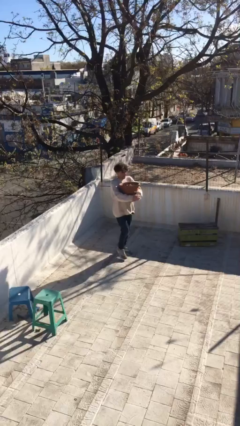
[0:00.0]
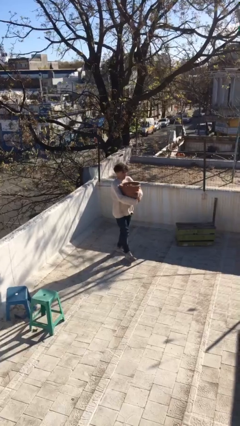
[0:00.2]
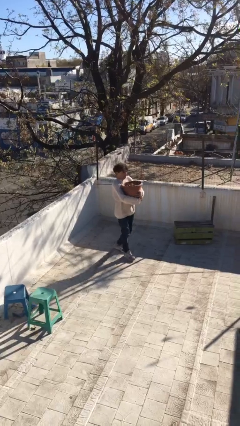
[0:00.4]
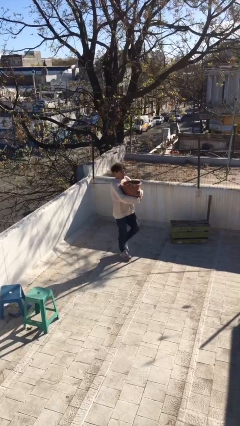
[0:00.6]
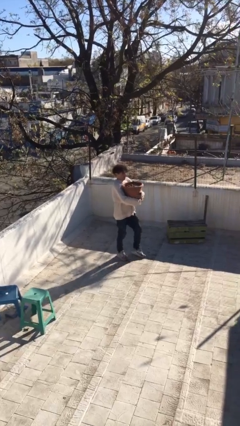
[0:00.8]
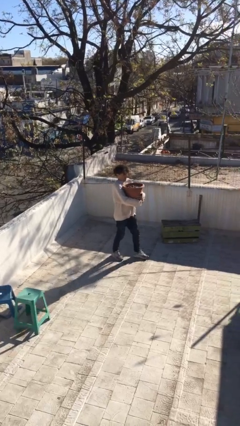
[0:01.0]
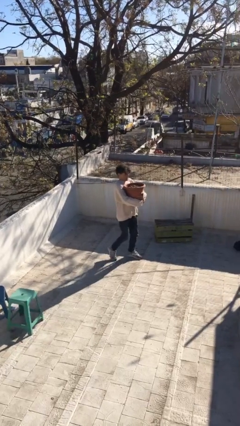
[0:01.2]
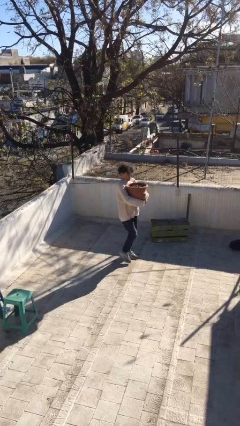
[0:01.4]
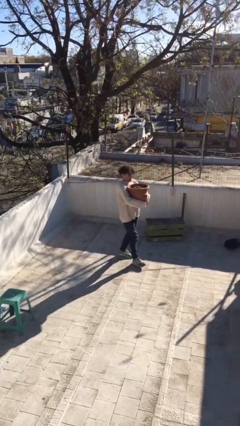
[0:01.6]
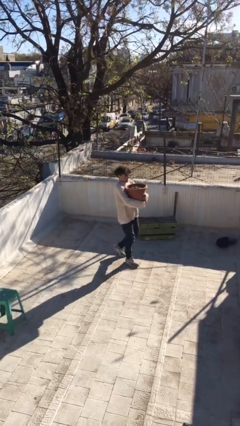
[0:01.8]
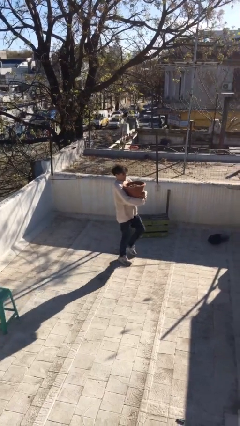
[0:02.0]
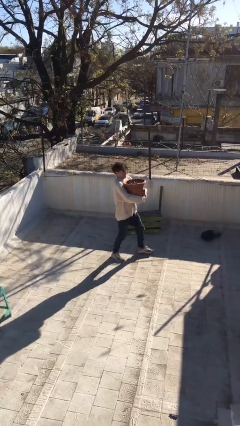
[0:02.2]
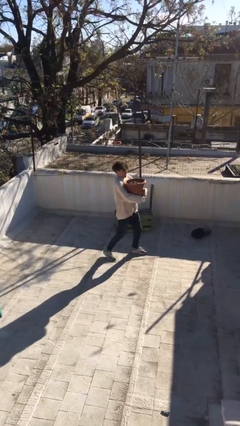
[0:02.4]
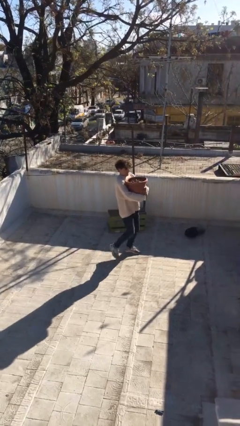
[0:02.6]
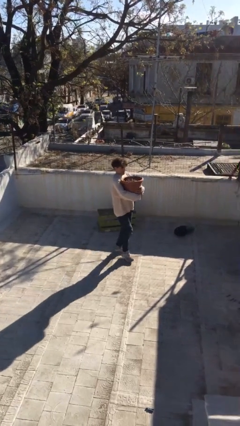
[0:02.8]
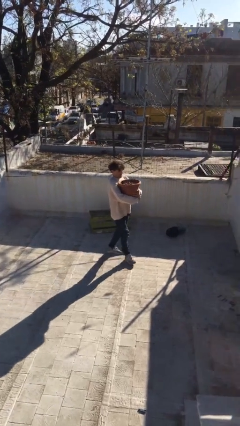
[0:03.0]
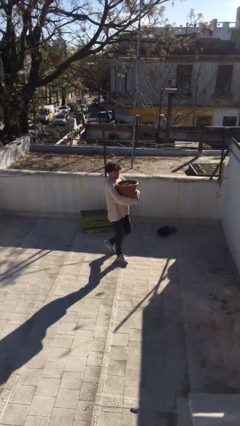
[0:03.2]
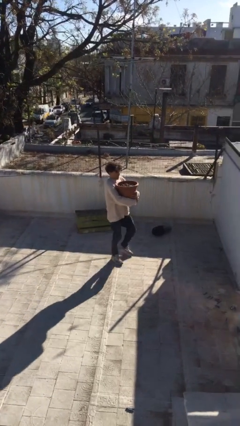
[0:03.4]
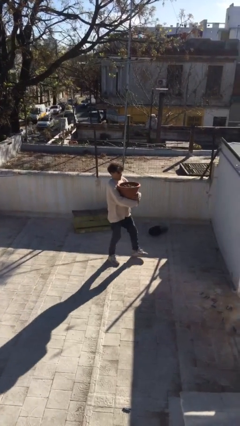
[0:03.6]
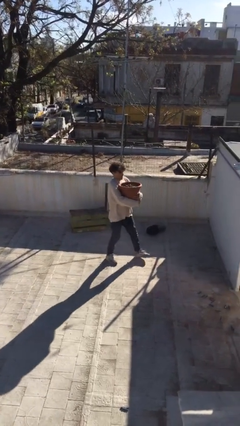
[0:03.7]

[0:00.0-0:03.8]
person carries heavy object

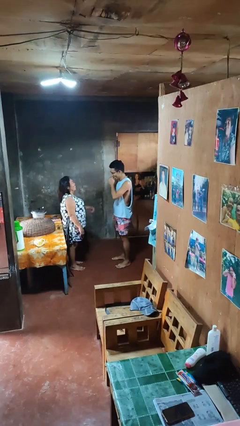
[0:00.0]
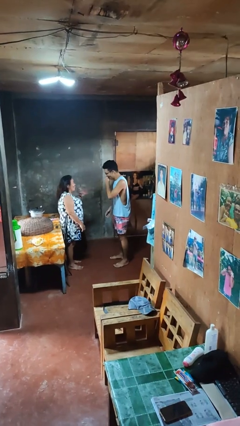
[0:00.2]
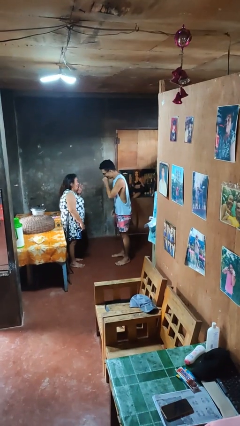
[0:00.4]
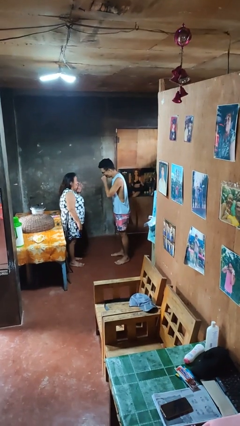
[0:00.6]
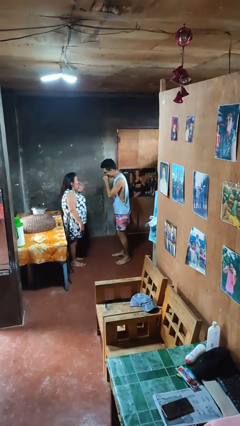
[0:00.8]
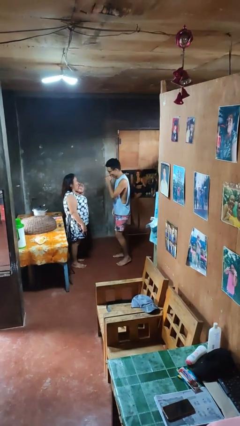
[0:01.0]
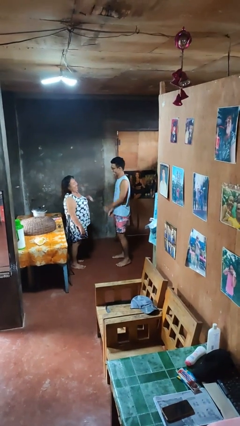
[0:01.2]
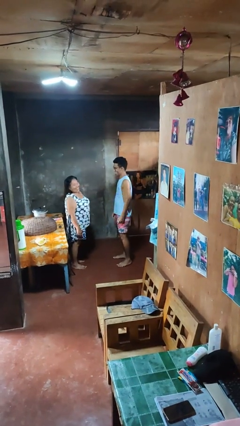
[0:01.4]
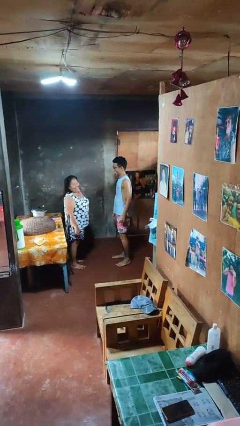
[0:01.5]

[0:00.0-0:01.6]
person laughs with person

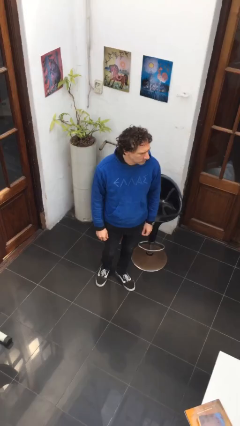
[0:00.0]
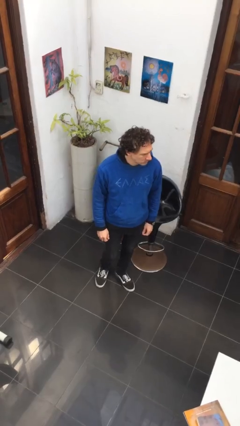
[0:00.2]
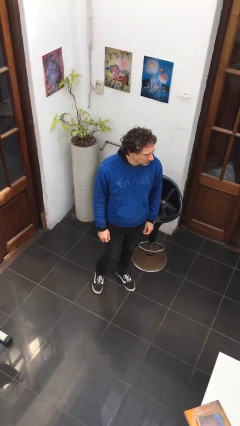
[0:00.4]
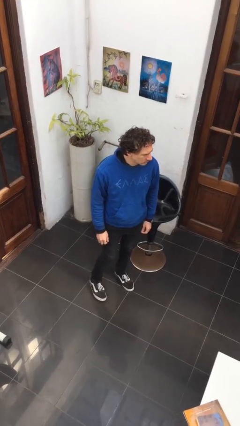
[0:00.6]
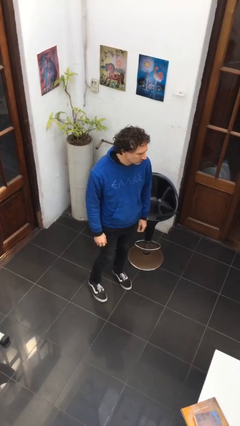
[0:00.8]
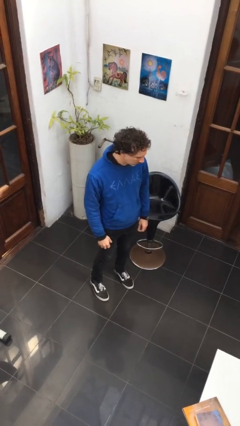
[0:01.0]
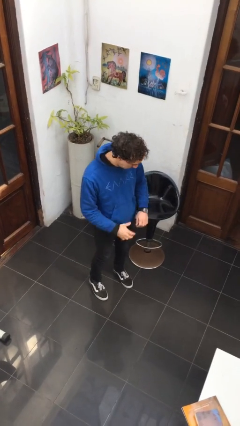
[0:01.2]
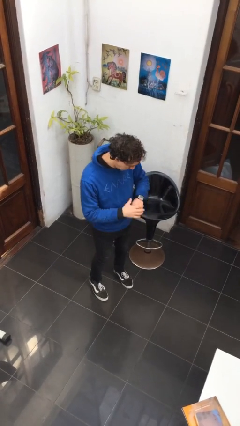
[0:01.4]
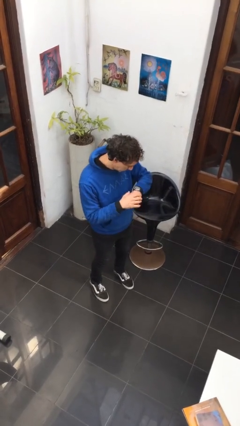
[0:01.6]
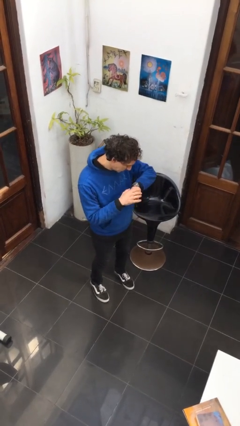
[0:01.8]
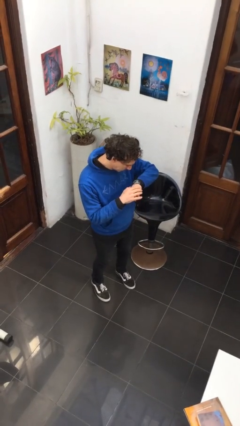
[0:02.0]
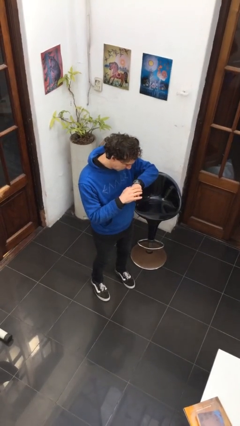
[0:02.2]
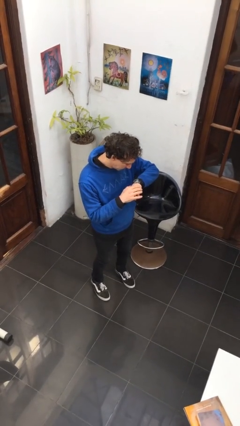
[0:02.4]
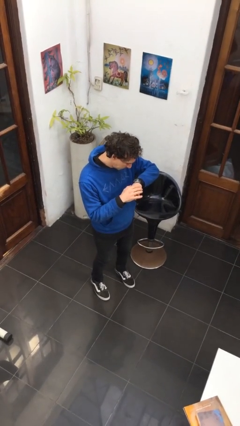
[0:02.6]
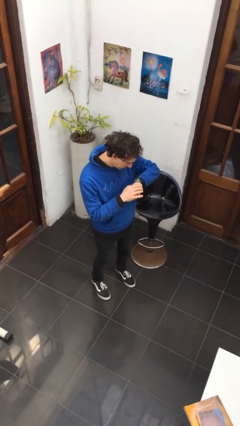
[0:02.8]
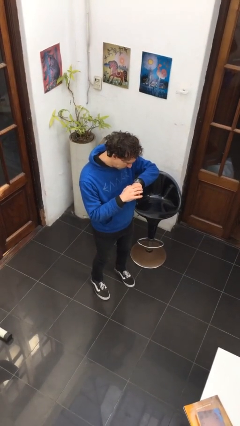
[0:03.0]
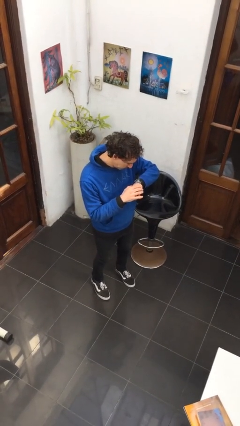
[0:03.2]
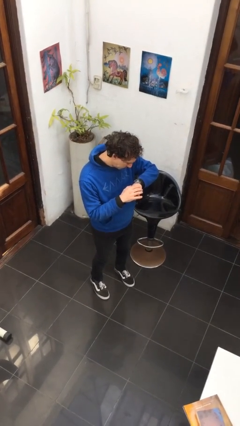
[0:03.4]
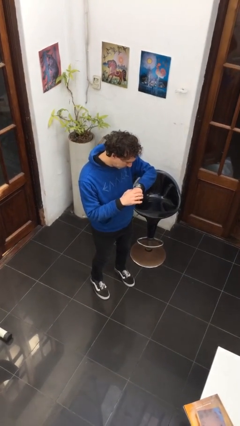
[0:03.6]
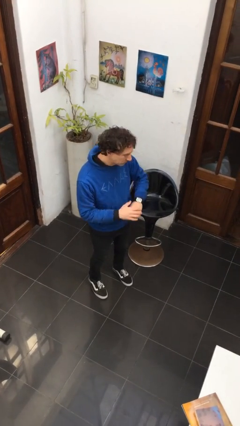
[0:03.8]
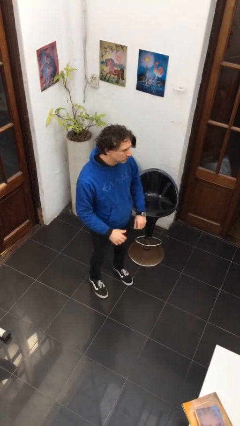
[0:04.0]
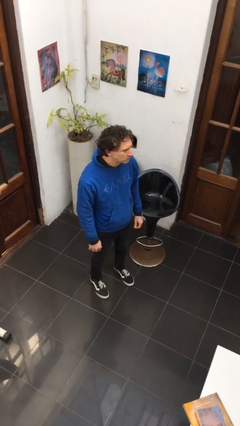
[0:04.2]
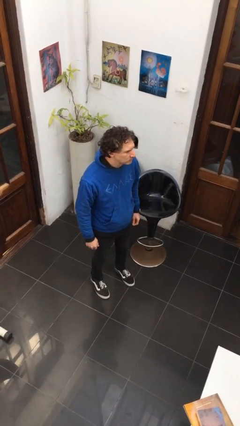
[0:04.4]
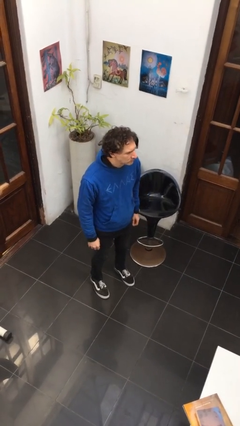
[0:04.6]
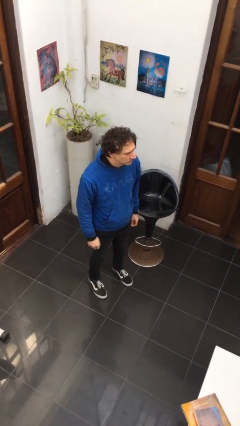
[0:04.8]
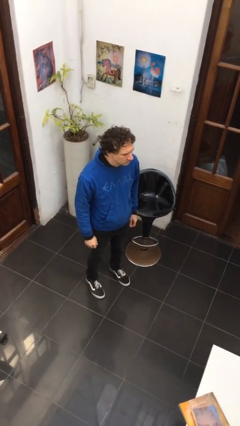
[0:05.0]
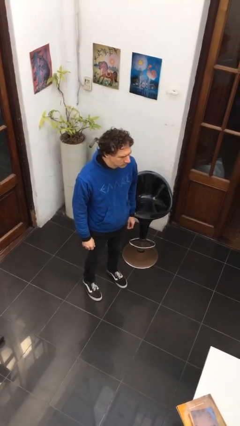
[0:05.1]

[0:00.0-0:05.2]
person looks at wristwatch

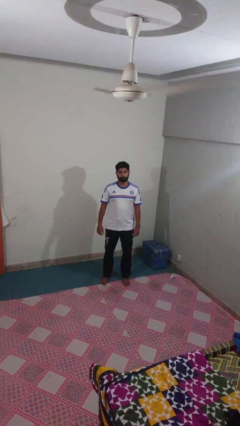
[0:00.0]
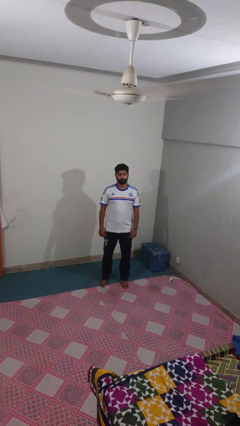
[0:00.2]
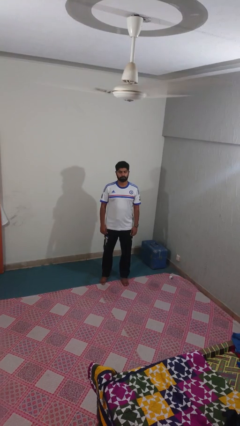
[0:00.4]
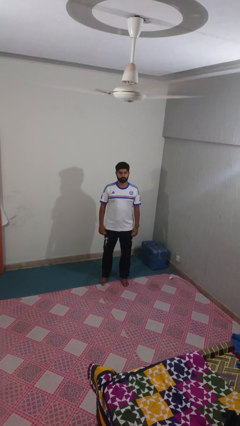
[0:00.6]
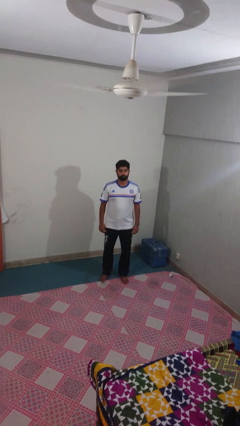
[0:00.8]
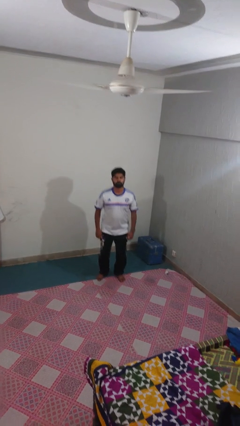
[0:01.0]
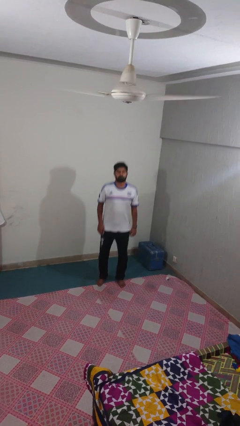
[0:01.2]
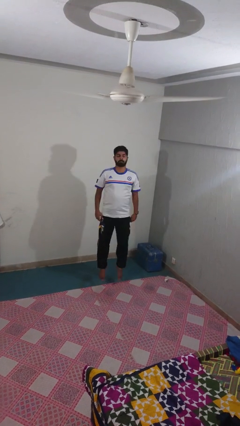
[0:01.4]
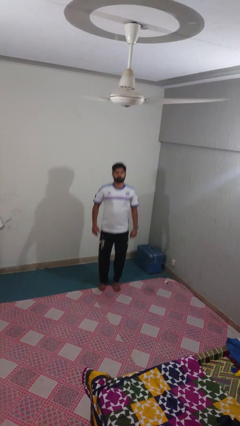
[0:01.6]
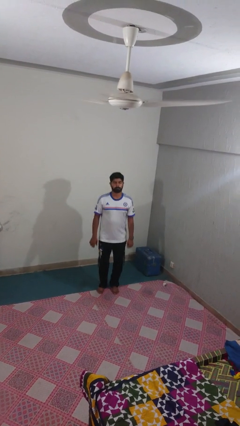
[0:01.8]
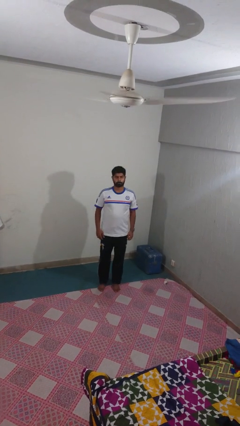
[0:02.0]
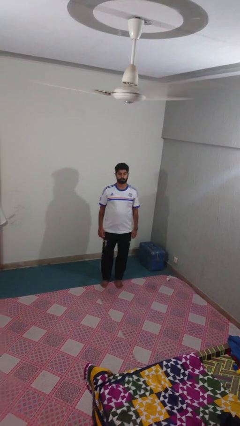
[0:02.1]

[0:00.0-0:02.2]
person jumps

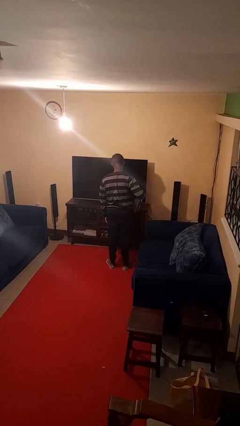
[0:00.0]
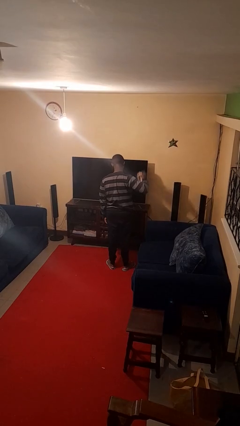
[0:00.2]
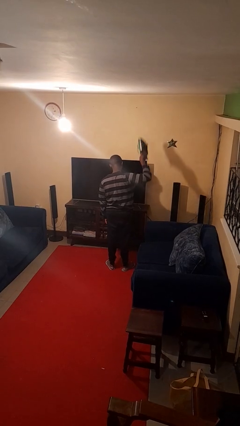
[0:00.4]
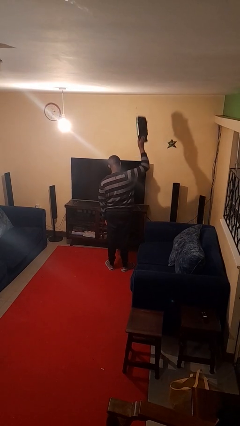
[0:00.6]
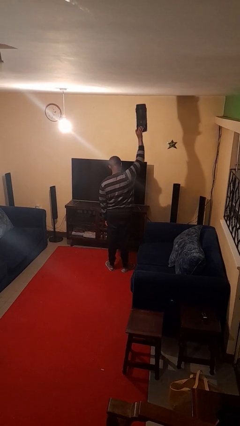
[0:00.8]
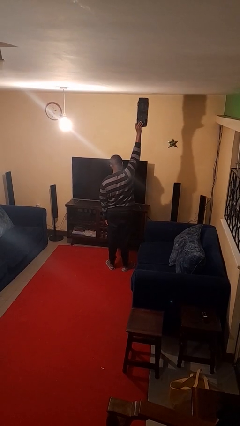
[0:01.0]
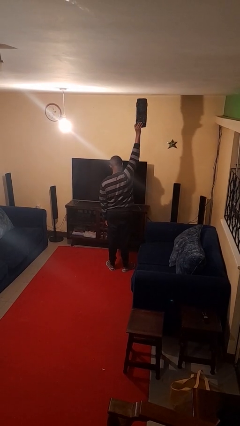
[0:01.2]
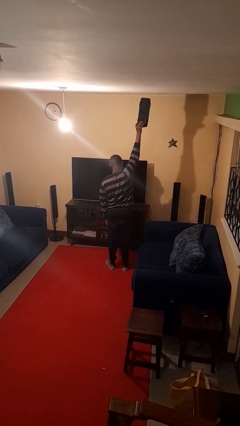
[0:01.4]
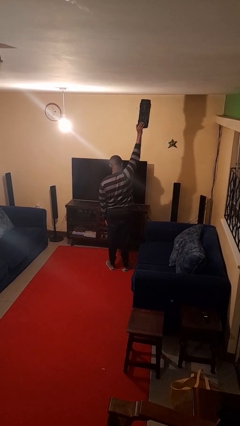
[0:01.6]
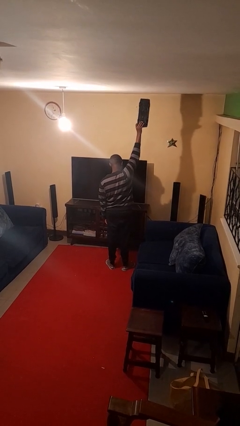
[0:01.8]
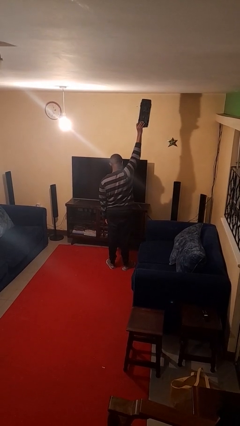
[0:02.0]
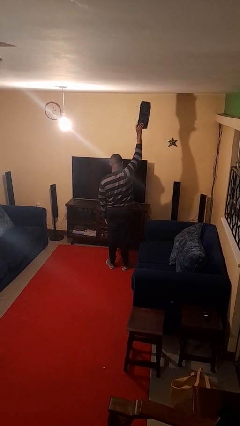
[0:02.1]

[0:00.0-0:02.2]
person holds object above head

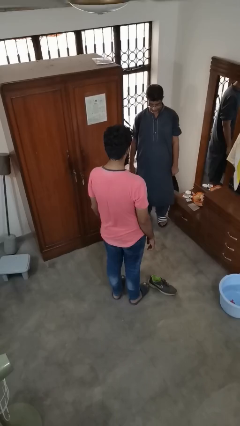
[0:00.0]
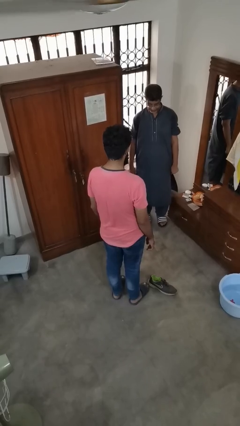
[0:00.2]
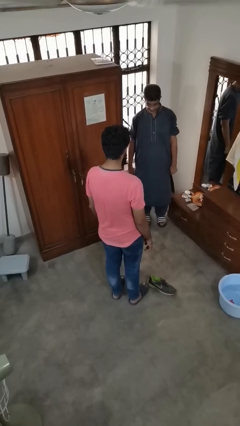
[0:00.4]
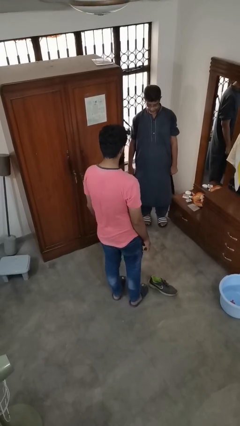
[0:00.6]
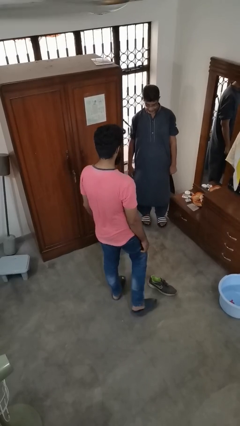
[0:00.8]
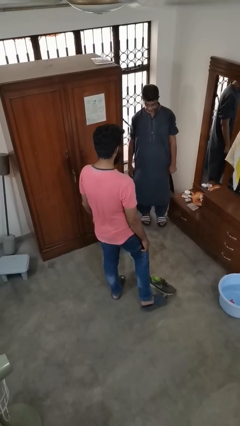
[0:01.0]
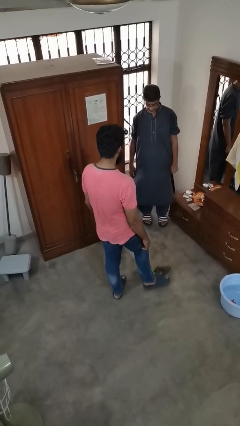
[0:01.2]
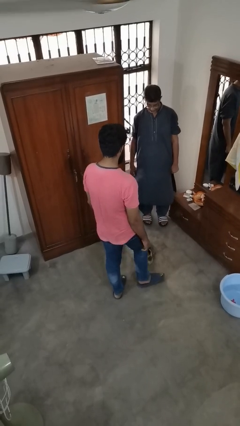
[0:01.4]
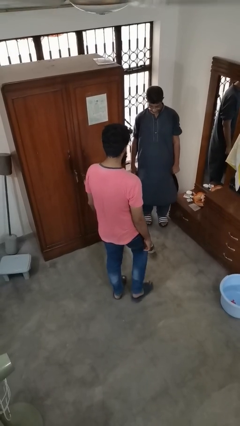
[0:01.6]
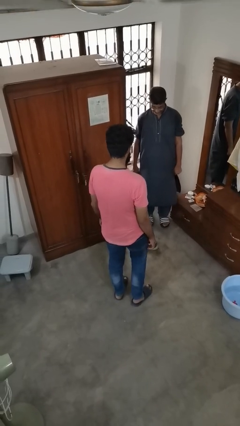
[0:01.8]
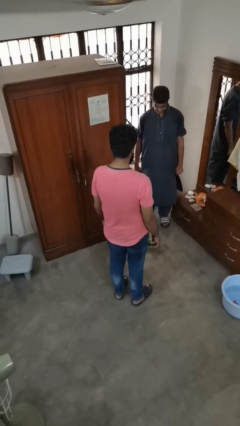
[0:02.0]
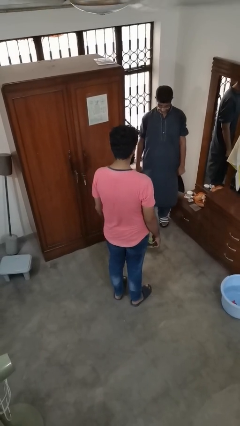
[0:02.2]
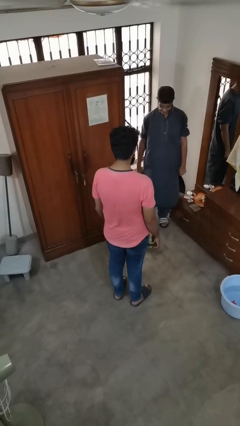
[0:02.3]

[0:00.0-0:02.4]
person kicks object to person

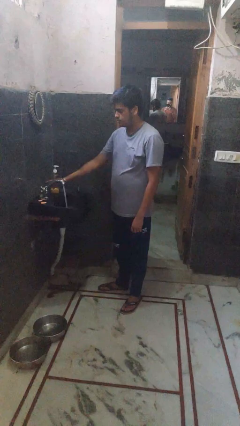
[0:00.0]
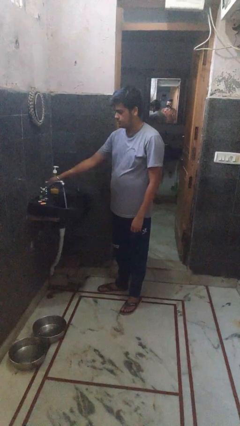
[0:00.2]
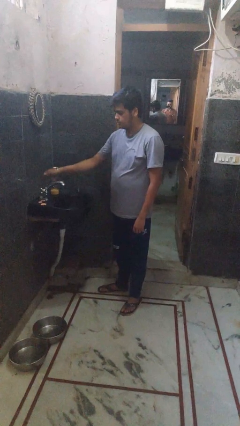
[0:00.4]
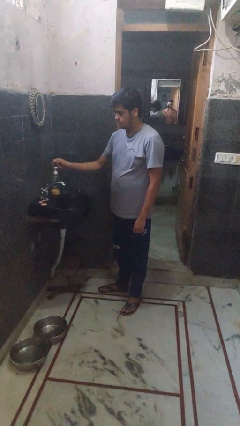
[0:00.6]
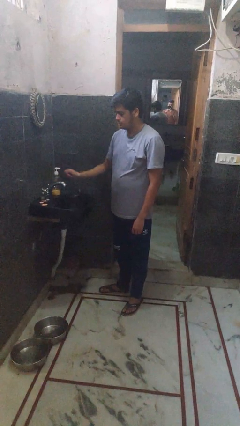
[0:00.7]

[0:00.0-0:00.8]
person turns off faucet
